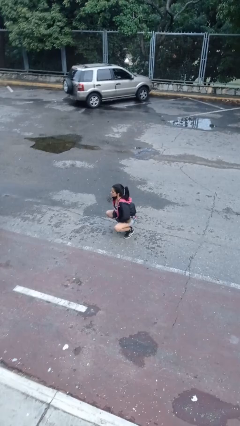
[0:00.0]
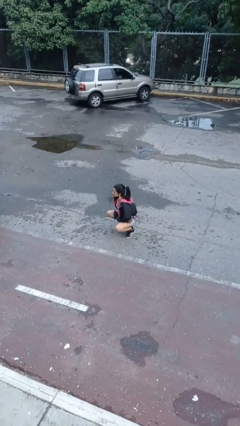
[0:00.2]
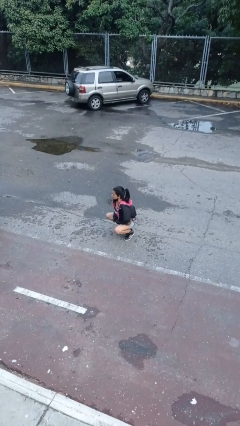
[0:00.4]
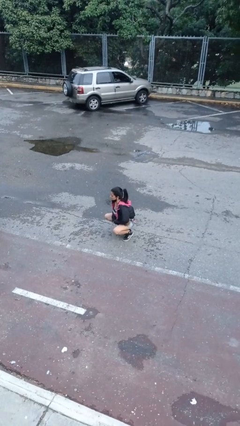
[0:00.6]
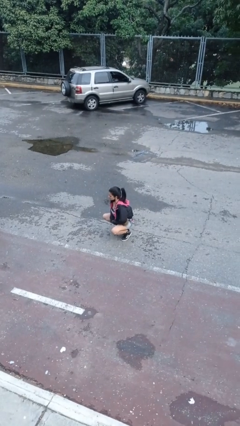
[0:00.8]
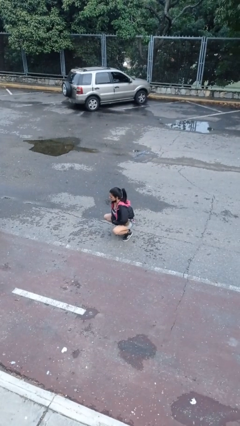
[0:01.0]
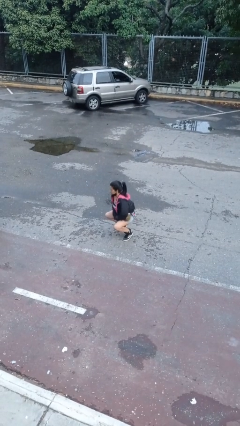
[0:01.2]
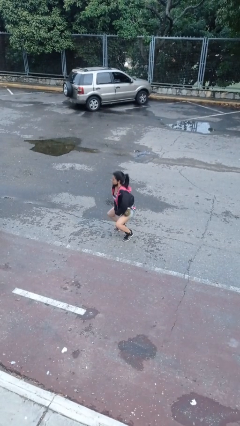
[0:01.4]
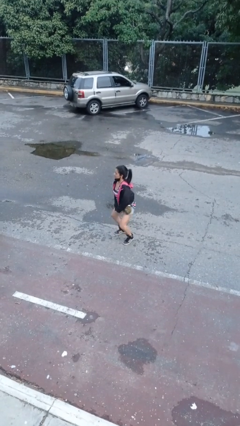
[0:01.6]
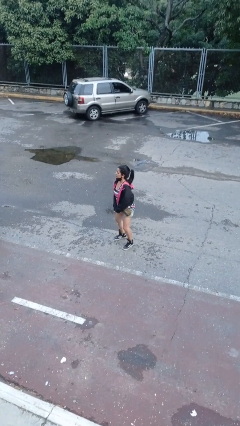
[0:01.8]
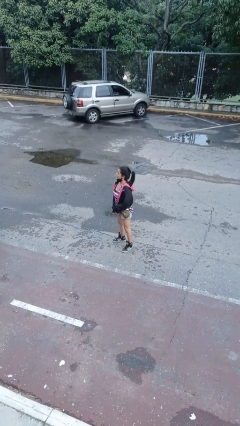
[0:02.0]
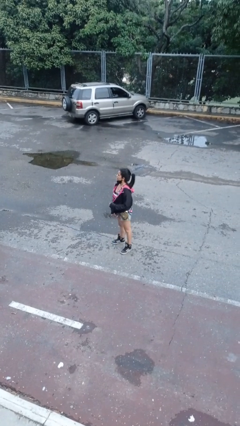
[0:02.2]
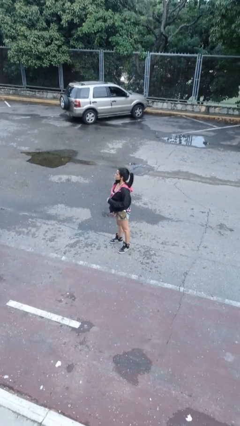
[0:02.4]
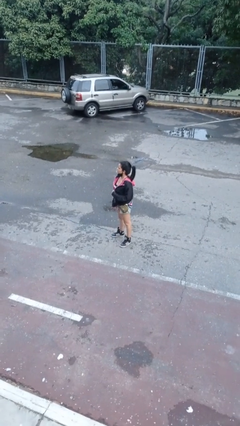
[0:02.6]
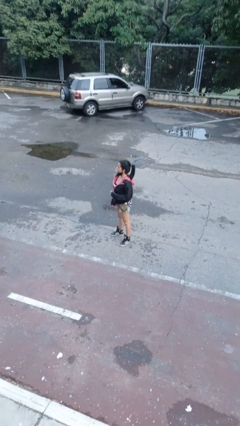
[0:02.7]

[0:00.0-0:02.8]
person stands up

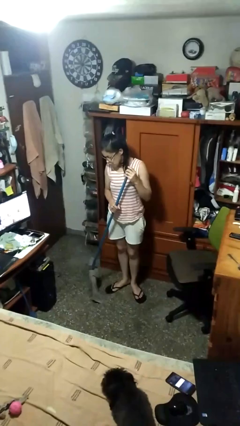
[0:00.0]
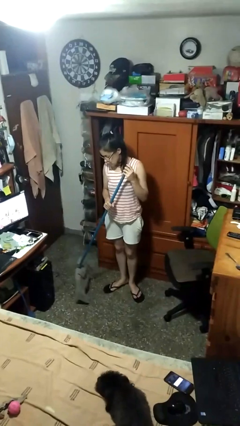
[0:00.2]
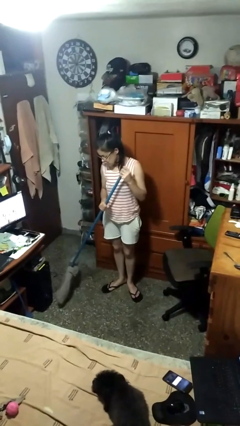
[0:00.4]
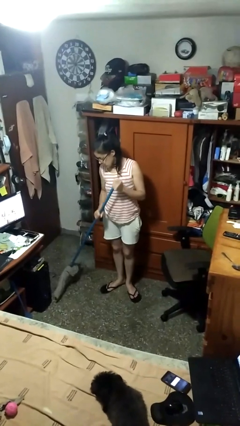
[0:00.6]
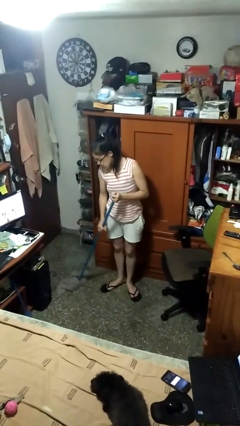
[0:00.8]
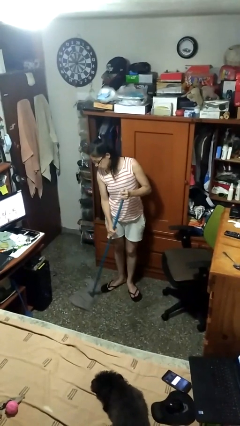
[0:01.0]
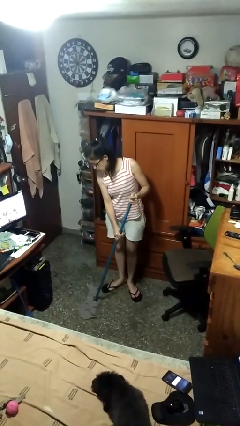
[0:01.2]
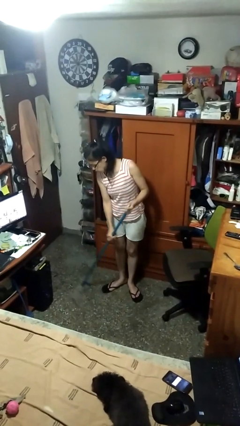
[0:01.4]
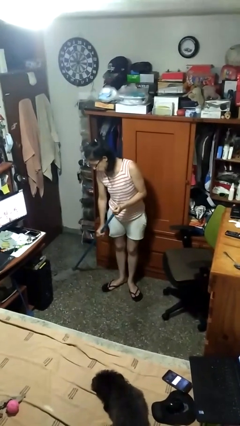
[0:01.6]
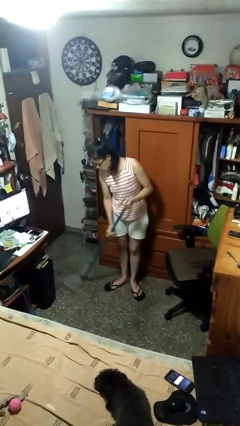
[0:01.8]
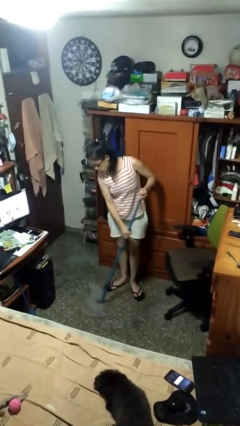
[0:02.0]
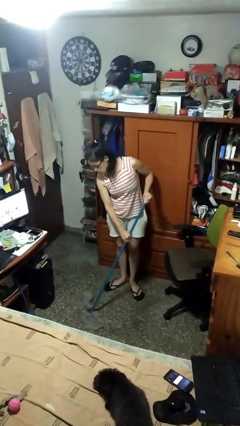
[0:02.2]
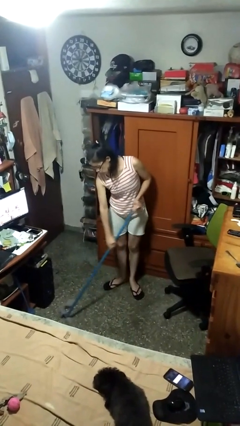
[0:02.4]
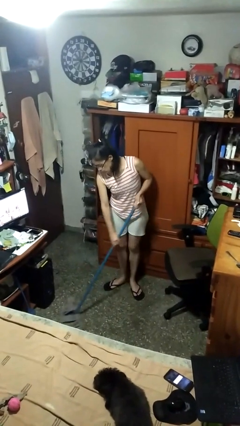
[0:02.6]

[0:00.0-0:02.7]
person mops

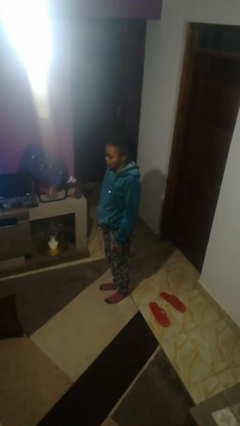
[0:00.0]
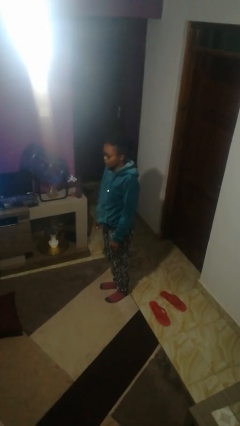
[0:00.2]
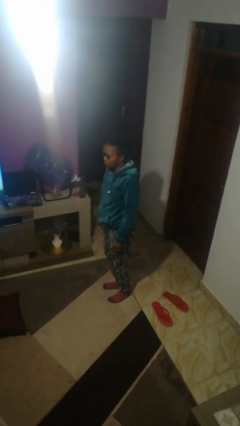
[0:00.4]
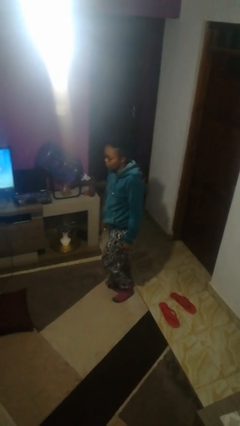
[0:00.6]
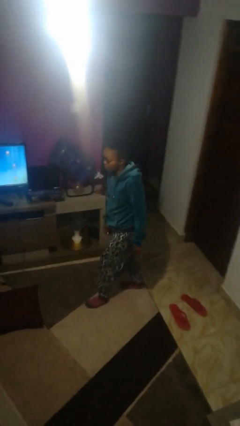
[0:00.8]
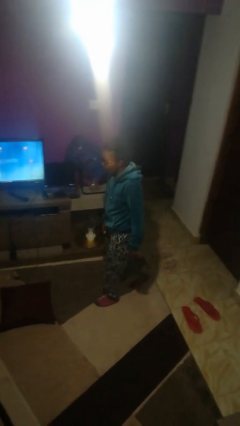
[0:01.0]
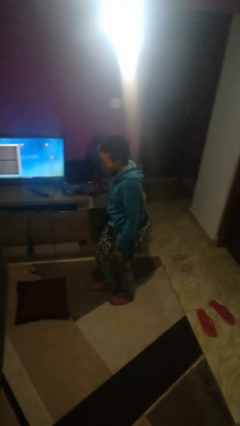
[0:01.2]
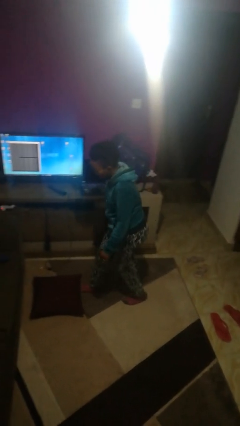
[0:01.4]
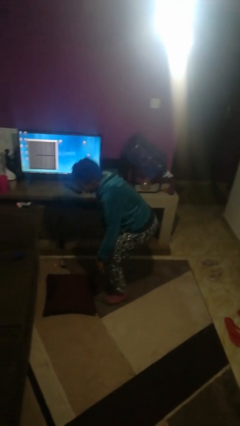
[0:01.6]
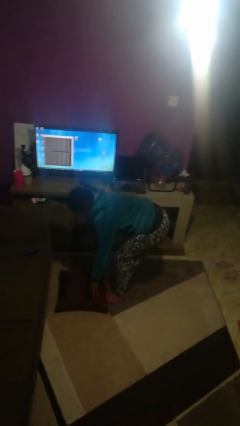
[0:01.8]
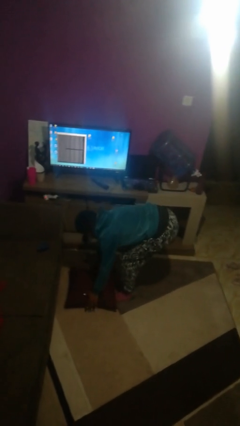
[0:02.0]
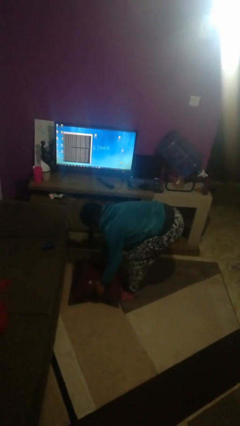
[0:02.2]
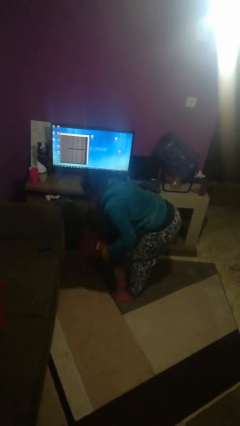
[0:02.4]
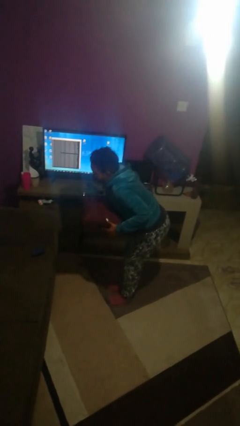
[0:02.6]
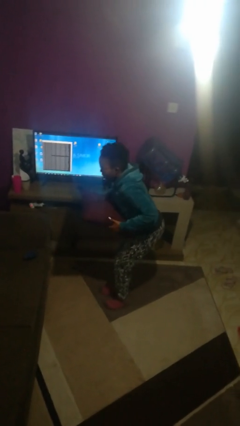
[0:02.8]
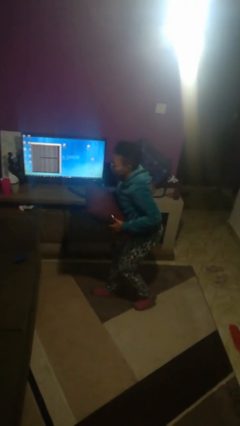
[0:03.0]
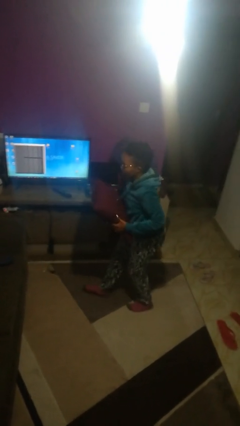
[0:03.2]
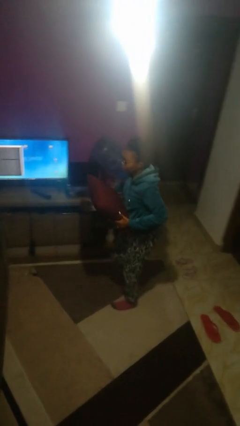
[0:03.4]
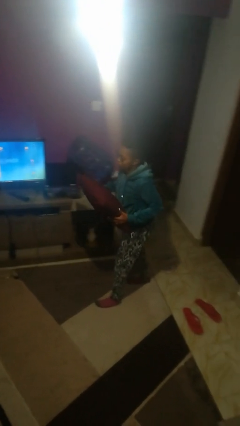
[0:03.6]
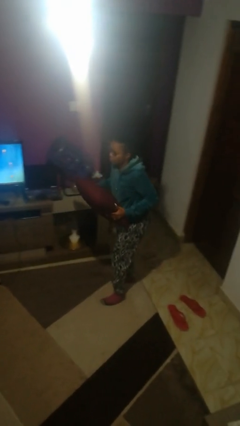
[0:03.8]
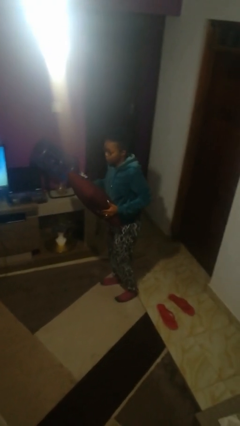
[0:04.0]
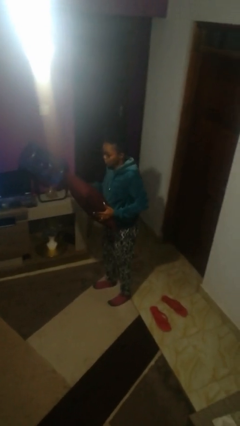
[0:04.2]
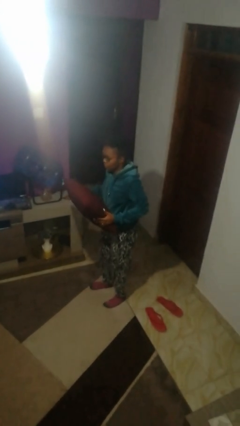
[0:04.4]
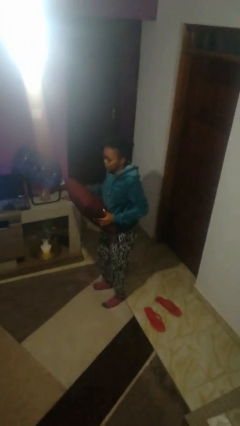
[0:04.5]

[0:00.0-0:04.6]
person picks up object from floor

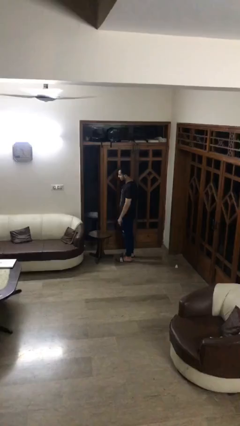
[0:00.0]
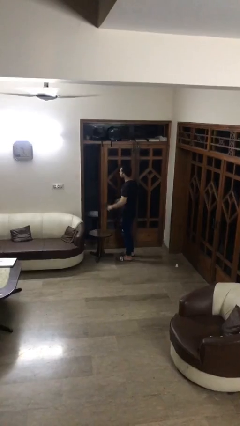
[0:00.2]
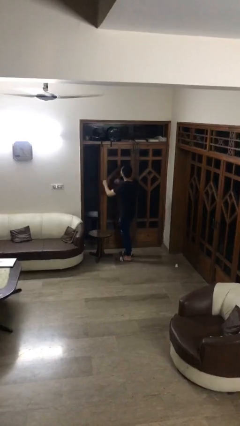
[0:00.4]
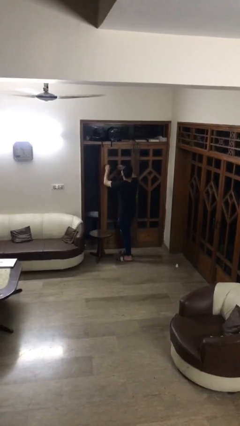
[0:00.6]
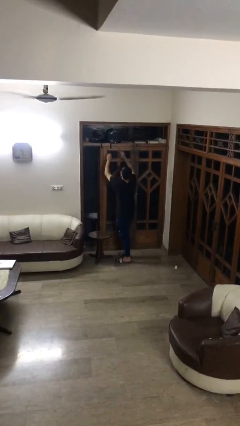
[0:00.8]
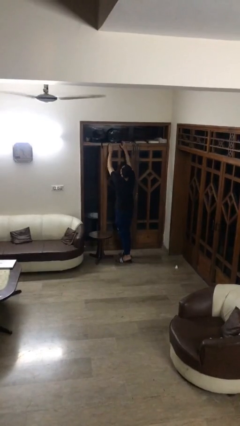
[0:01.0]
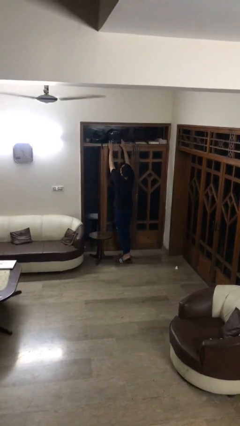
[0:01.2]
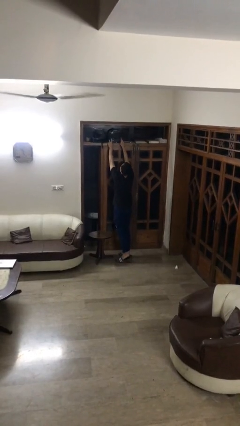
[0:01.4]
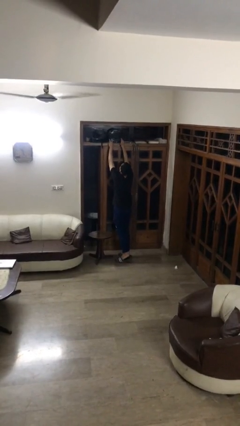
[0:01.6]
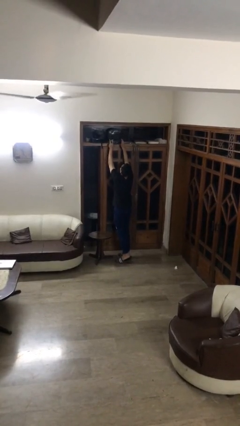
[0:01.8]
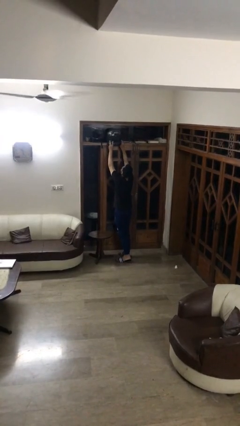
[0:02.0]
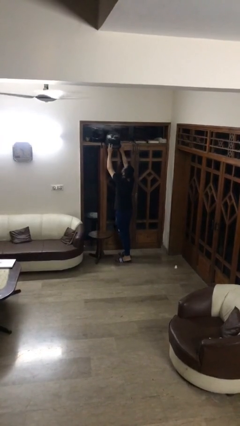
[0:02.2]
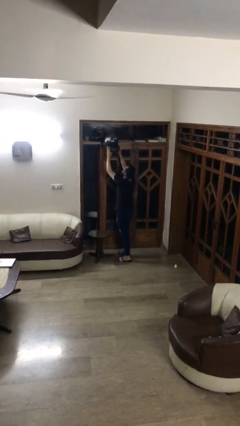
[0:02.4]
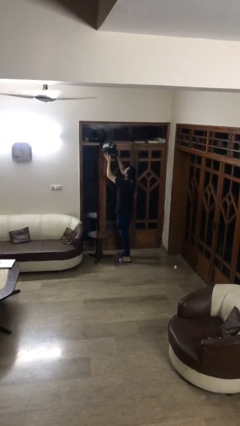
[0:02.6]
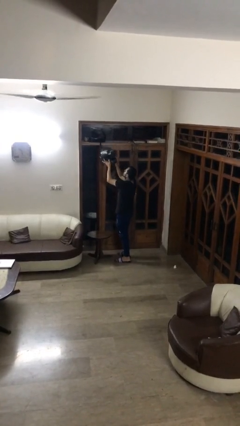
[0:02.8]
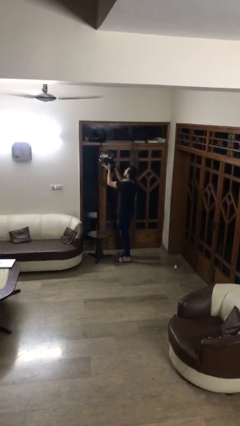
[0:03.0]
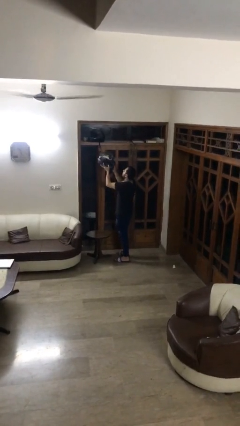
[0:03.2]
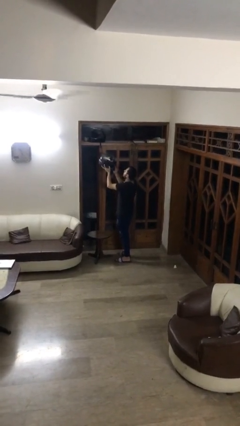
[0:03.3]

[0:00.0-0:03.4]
person picks up object from shelf

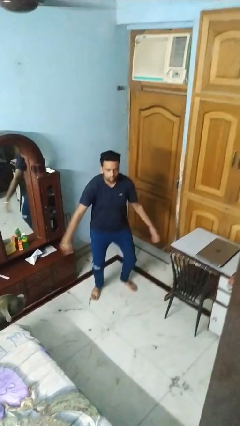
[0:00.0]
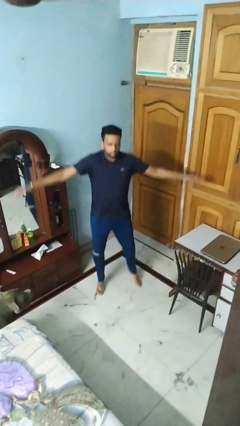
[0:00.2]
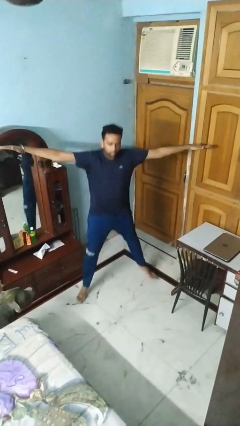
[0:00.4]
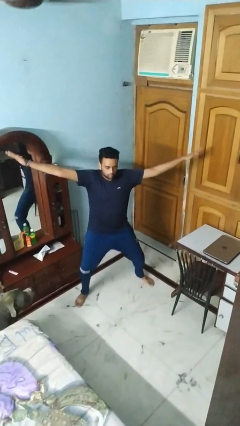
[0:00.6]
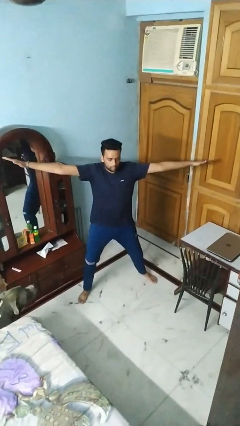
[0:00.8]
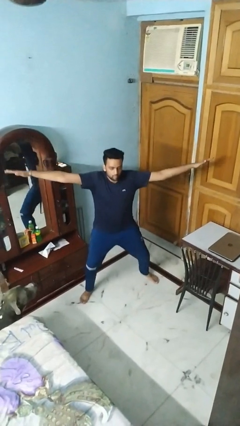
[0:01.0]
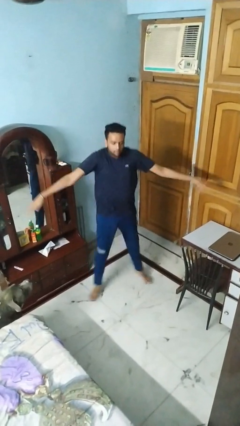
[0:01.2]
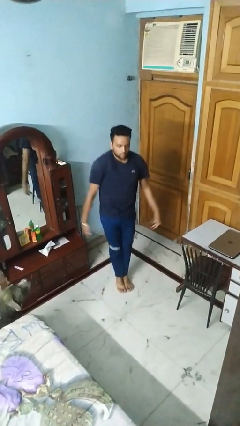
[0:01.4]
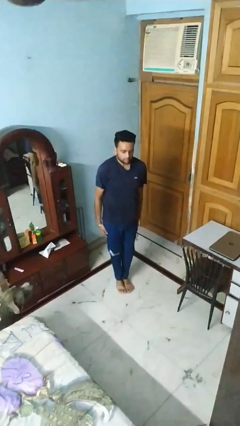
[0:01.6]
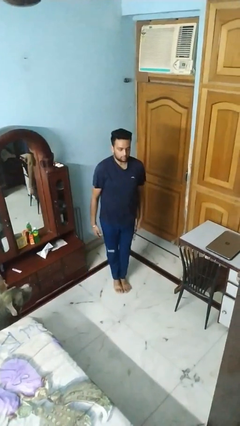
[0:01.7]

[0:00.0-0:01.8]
person exercises with jumping jacks

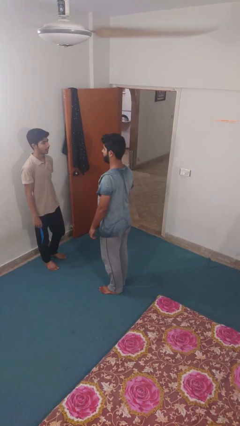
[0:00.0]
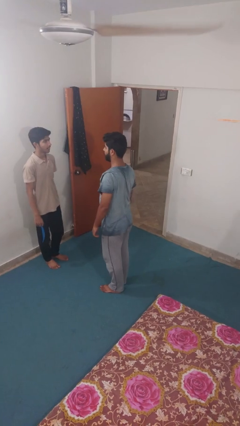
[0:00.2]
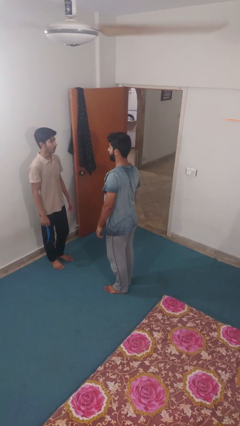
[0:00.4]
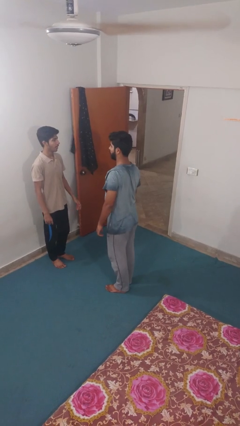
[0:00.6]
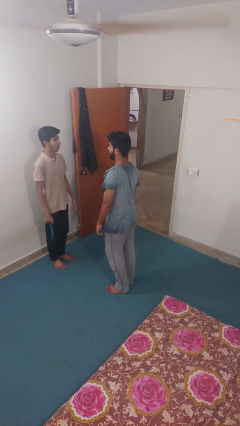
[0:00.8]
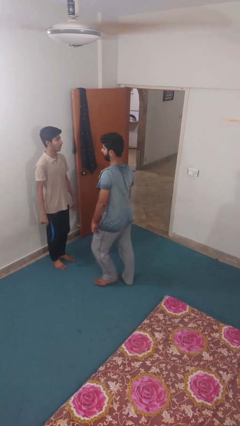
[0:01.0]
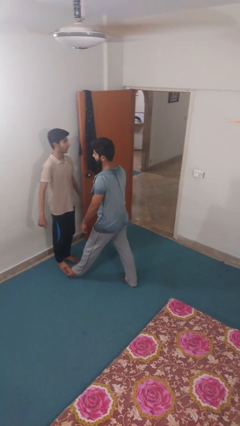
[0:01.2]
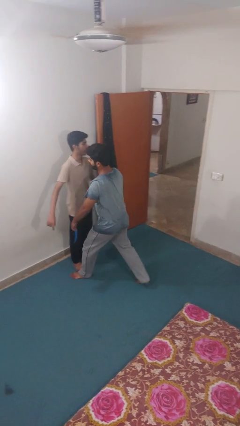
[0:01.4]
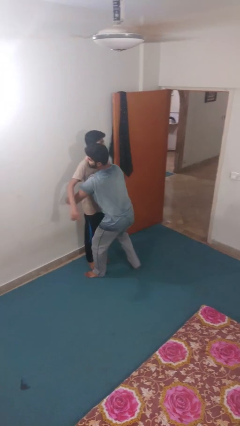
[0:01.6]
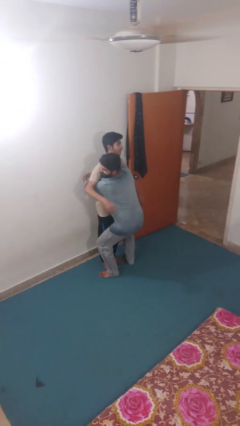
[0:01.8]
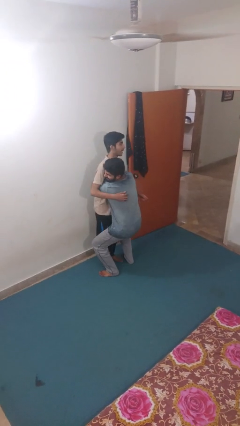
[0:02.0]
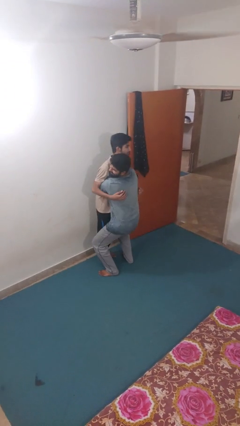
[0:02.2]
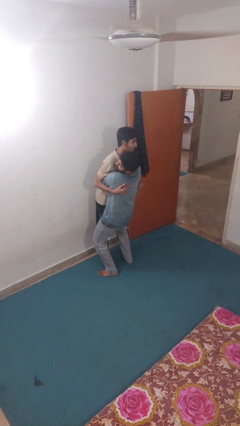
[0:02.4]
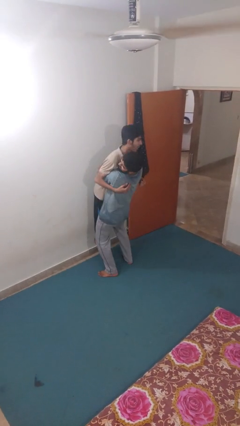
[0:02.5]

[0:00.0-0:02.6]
person picks up person
